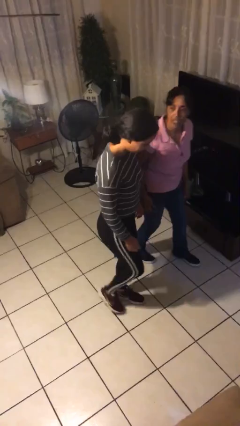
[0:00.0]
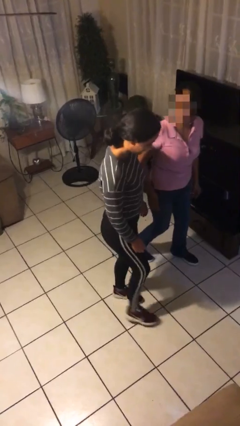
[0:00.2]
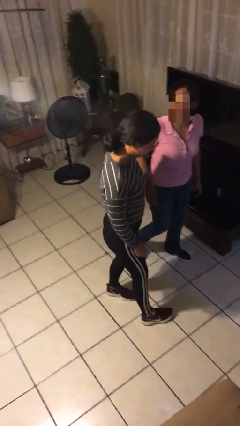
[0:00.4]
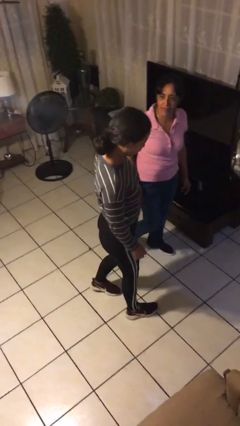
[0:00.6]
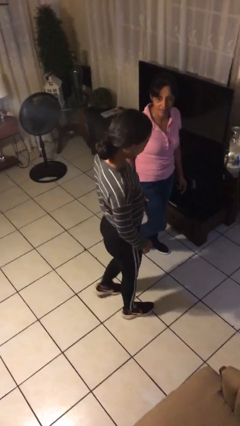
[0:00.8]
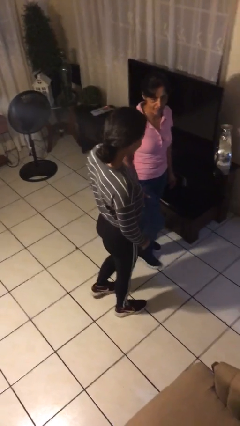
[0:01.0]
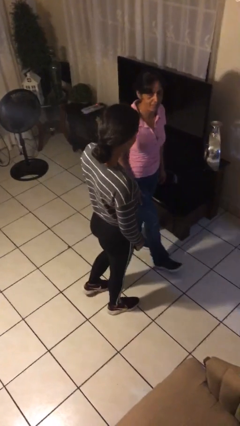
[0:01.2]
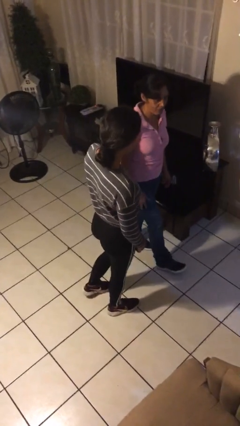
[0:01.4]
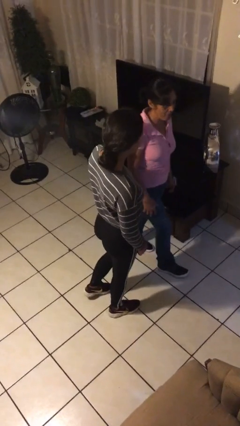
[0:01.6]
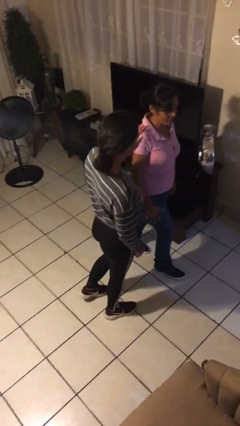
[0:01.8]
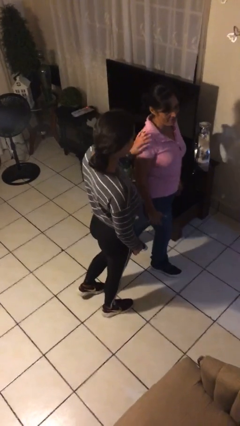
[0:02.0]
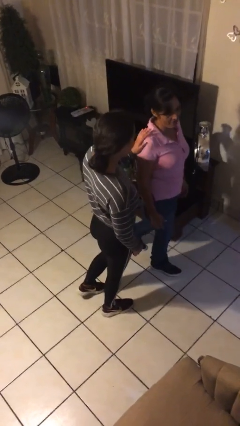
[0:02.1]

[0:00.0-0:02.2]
person bumps into person

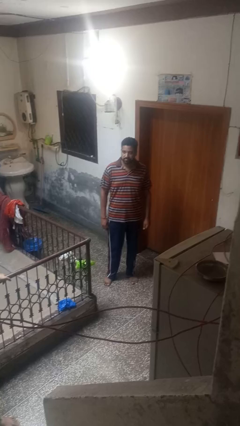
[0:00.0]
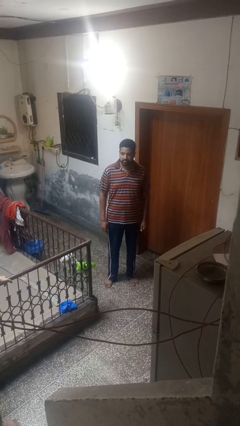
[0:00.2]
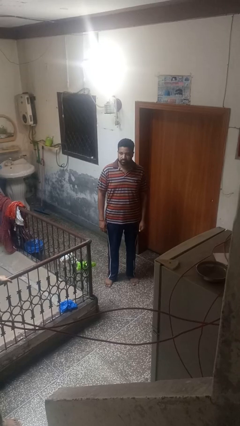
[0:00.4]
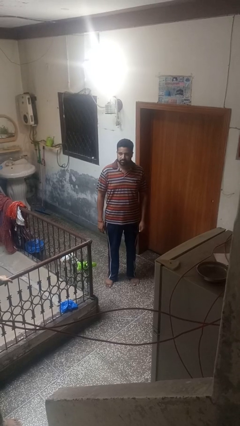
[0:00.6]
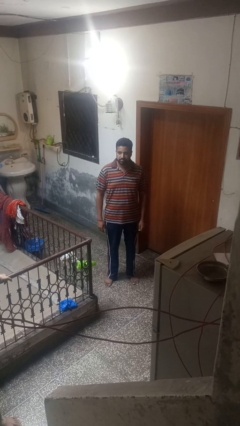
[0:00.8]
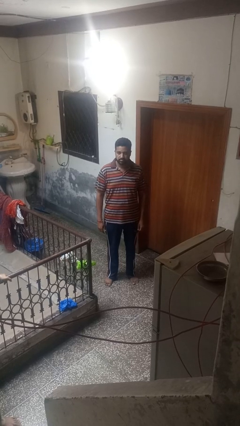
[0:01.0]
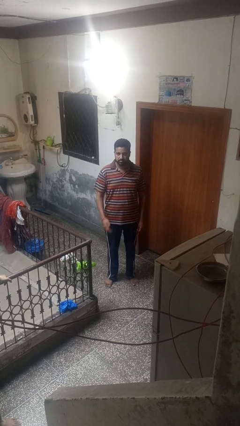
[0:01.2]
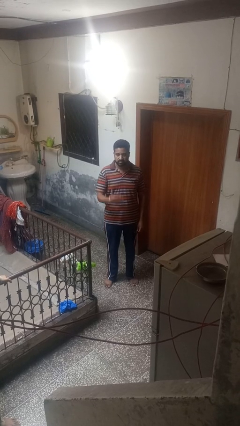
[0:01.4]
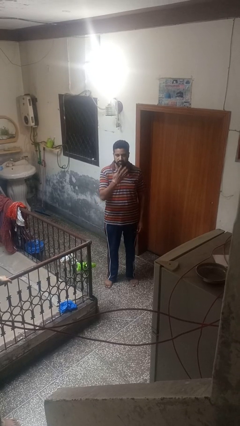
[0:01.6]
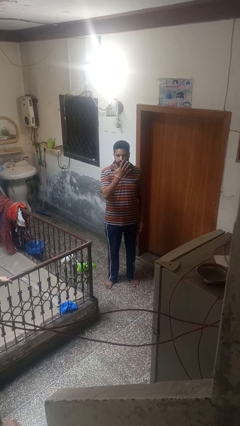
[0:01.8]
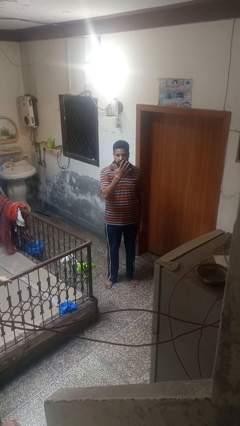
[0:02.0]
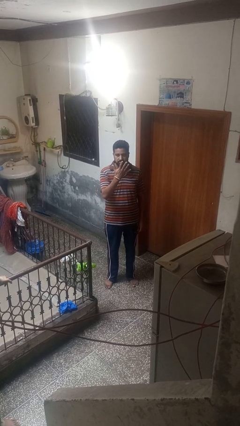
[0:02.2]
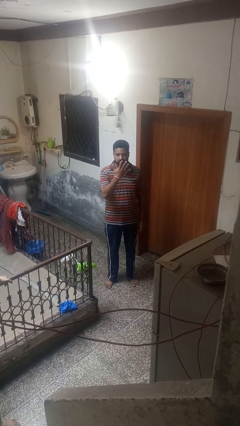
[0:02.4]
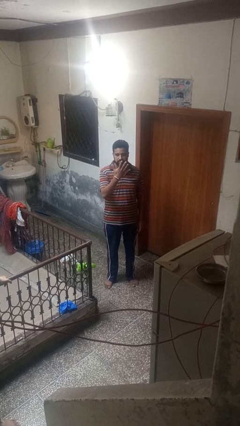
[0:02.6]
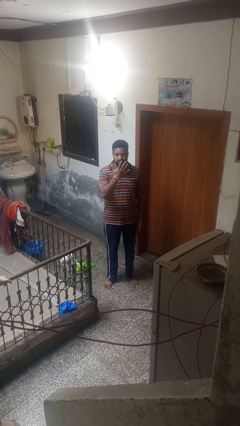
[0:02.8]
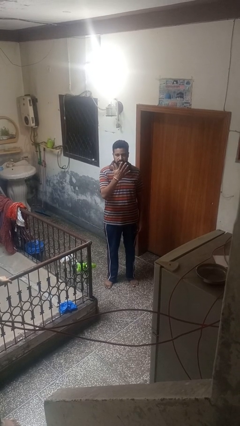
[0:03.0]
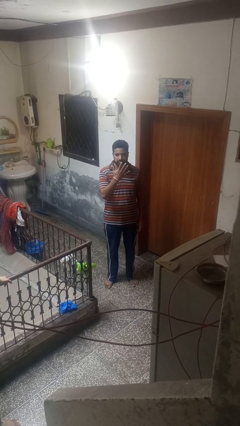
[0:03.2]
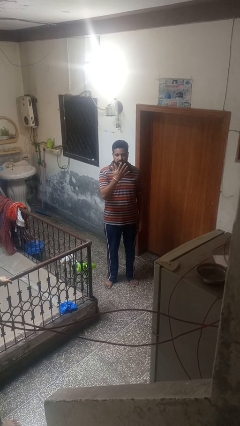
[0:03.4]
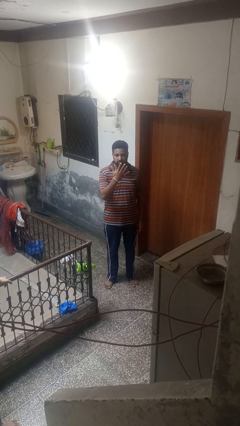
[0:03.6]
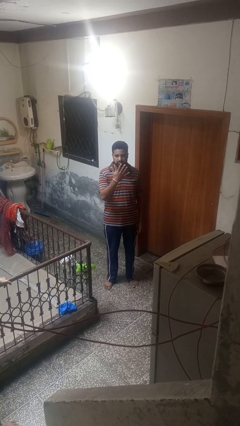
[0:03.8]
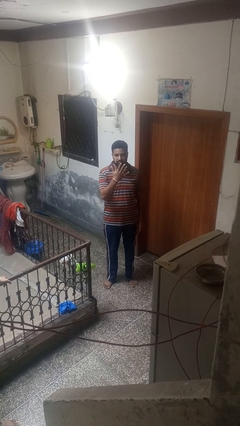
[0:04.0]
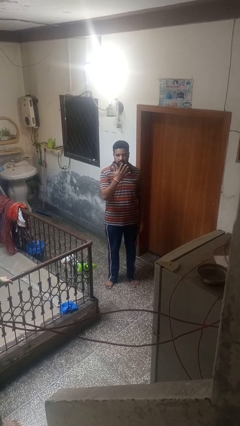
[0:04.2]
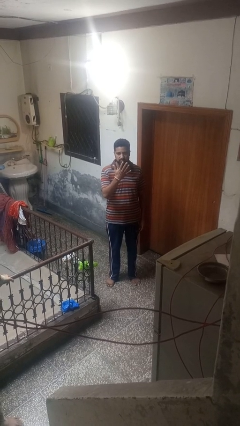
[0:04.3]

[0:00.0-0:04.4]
person gestures number five

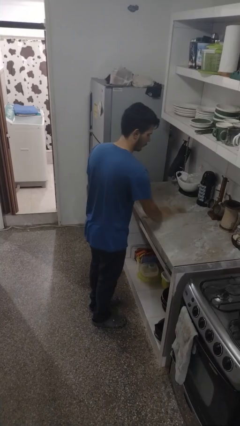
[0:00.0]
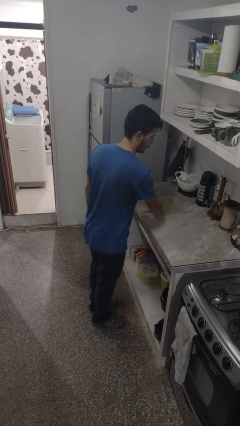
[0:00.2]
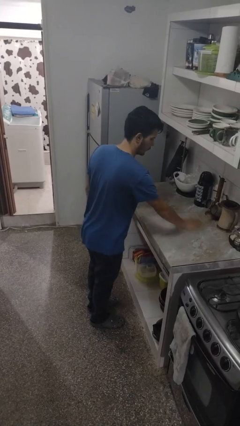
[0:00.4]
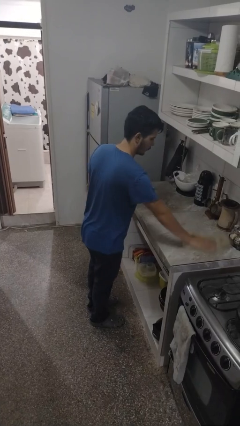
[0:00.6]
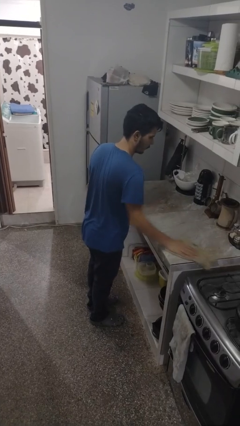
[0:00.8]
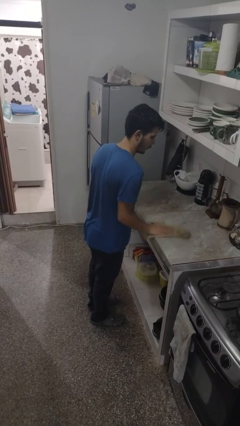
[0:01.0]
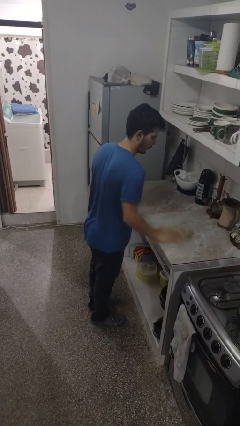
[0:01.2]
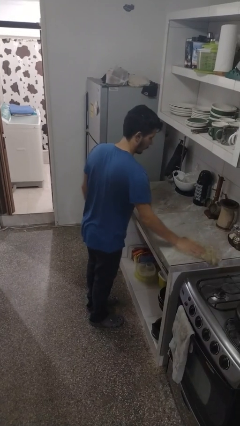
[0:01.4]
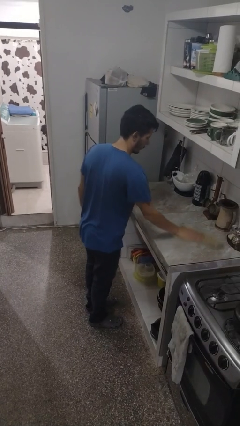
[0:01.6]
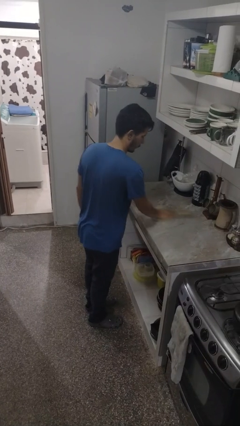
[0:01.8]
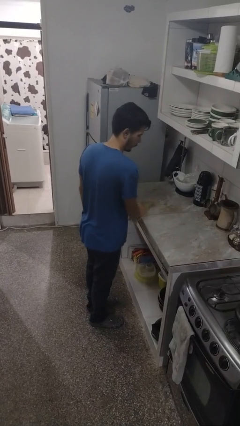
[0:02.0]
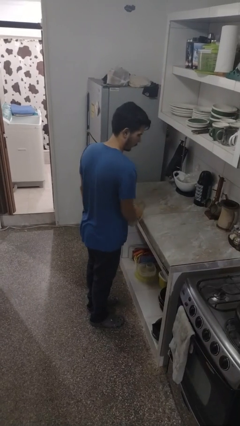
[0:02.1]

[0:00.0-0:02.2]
person cleans table with rag

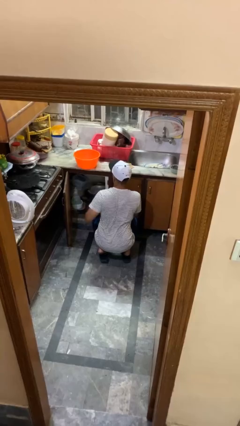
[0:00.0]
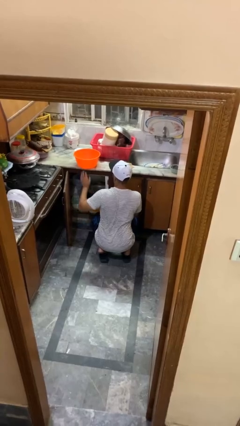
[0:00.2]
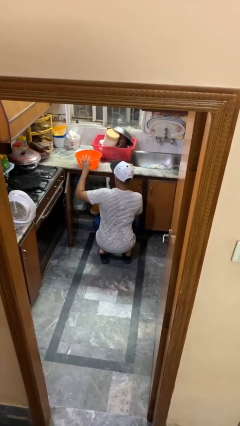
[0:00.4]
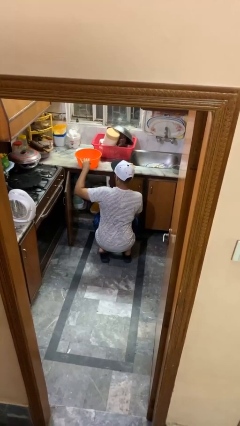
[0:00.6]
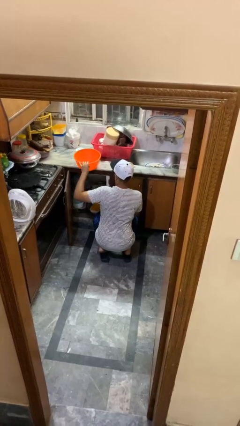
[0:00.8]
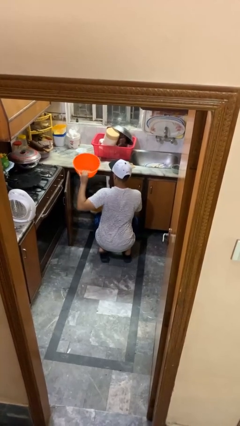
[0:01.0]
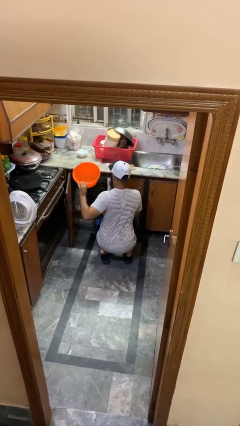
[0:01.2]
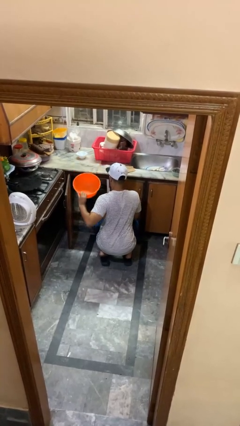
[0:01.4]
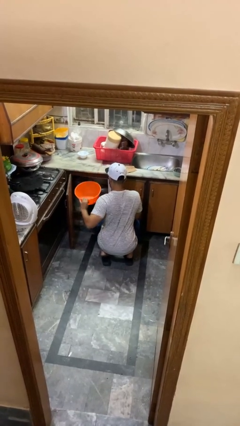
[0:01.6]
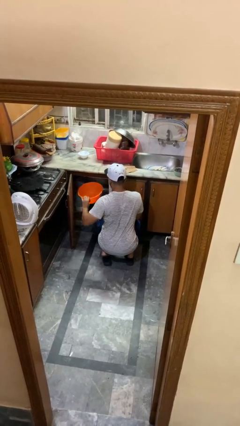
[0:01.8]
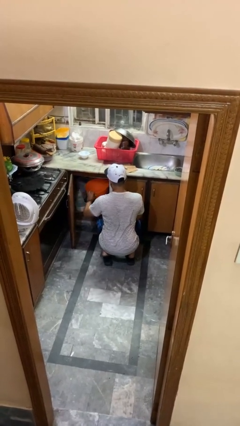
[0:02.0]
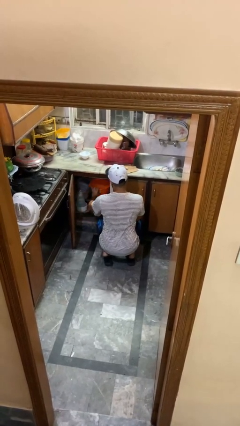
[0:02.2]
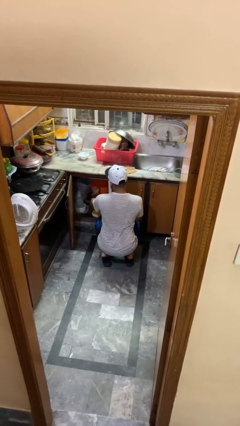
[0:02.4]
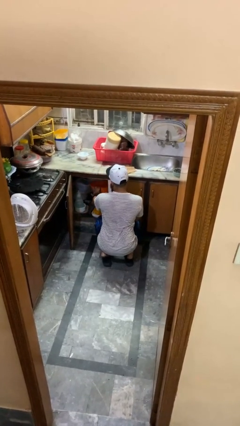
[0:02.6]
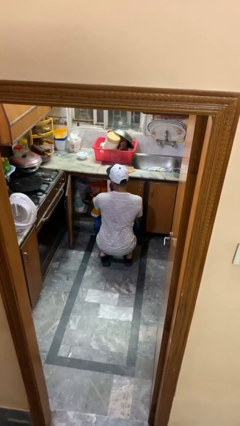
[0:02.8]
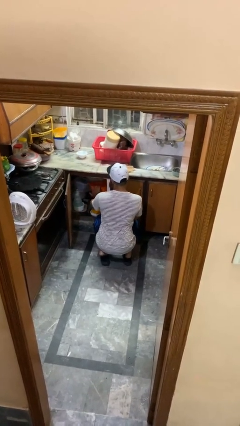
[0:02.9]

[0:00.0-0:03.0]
person puts object into kitchen drawer

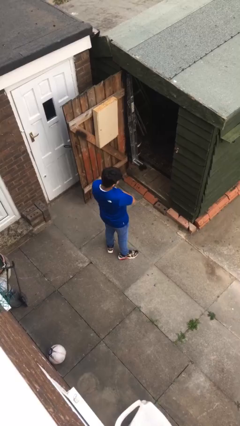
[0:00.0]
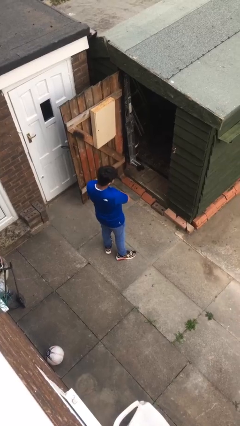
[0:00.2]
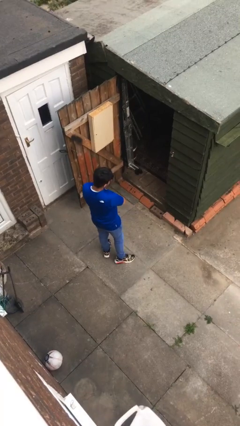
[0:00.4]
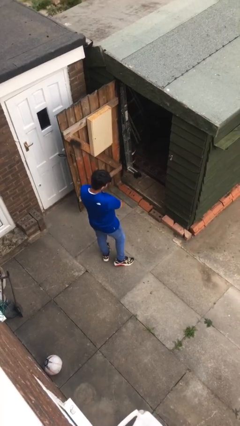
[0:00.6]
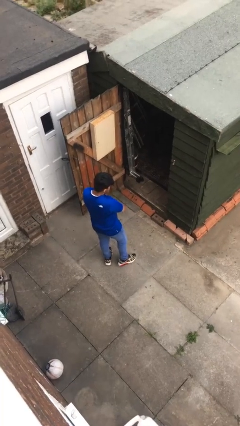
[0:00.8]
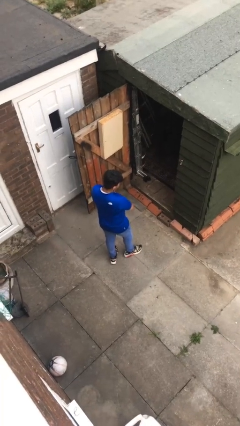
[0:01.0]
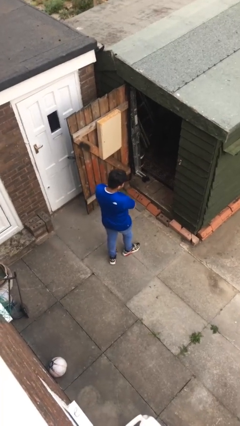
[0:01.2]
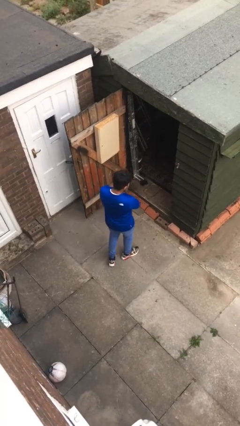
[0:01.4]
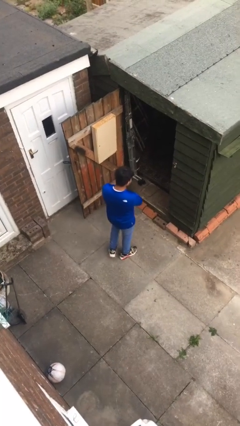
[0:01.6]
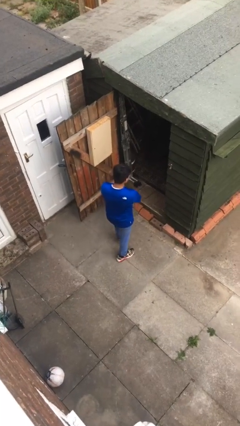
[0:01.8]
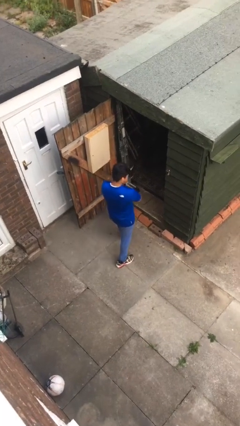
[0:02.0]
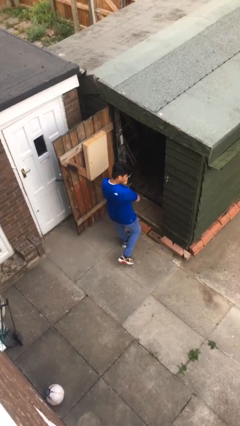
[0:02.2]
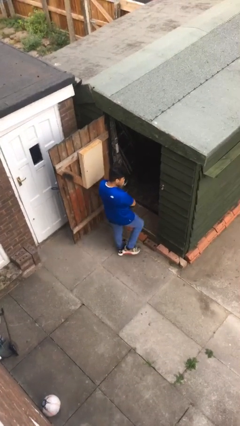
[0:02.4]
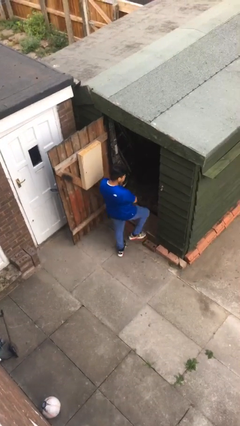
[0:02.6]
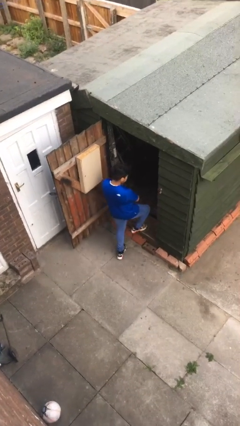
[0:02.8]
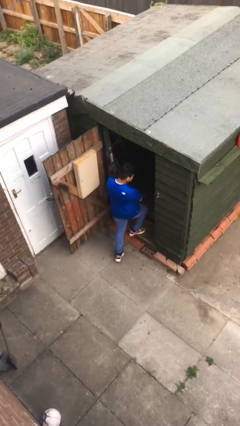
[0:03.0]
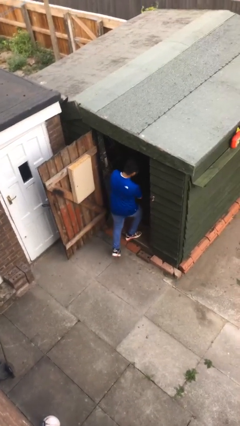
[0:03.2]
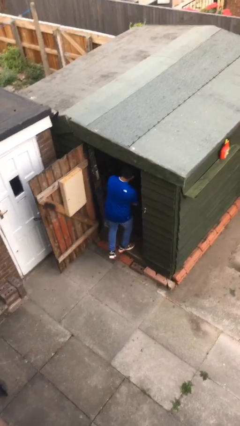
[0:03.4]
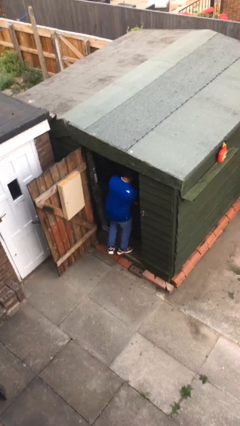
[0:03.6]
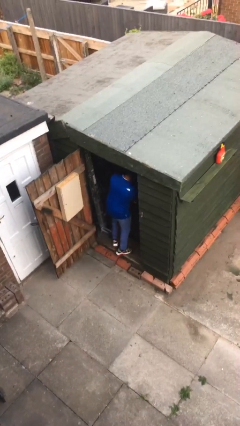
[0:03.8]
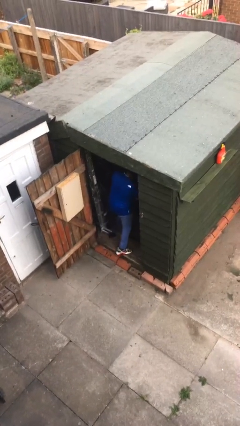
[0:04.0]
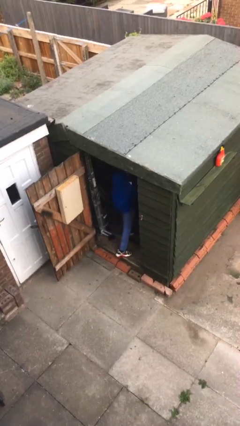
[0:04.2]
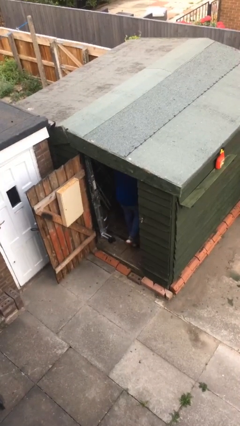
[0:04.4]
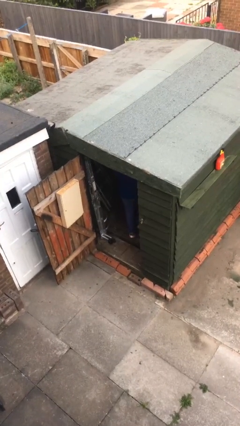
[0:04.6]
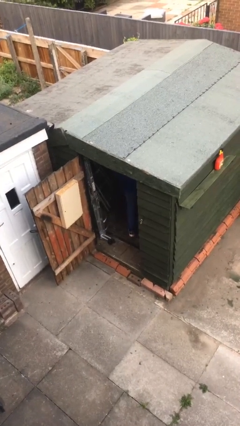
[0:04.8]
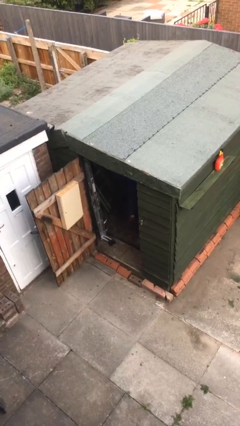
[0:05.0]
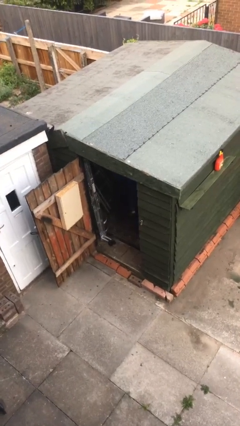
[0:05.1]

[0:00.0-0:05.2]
person exits scene through structure

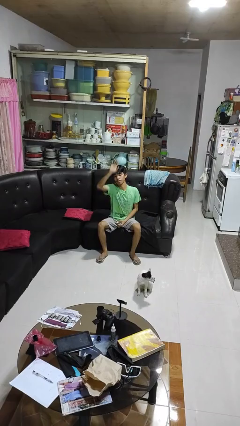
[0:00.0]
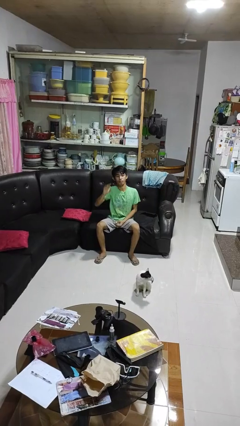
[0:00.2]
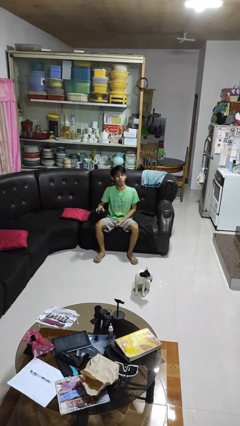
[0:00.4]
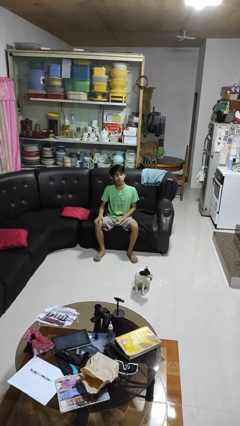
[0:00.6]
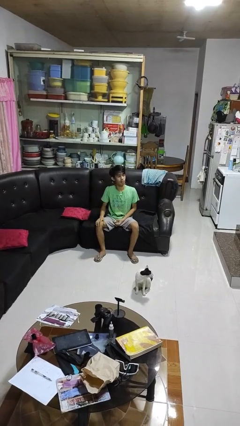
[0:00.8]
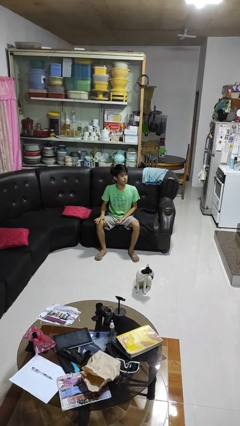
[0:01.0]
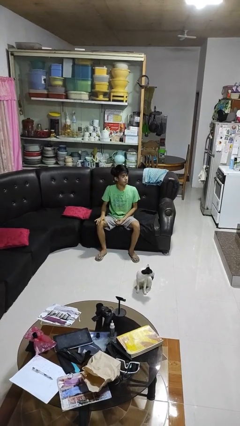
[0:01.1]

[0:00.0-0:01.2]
person gestures lower hand
